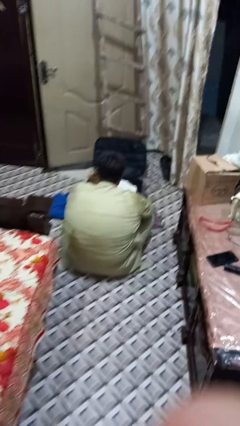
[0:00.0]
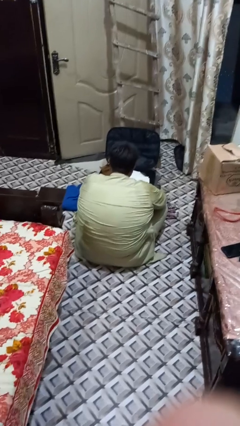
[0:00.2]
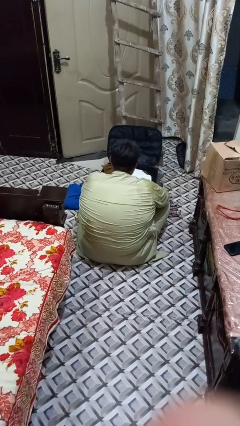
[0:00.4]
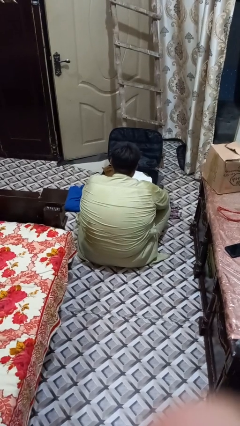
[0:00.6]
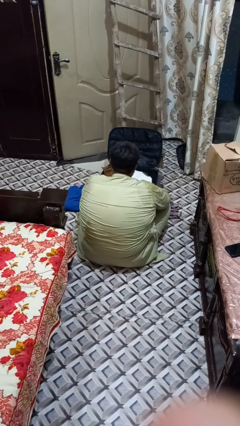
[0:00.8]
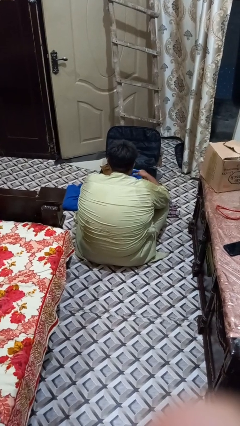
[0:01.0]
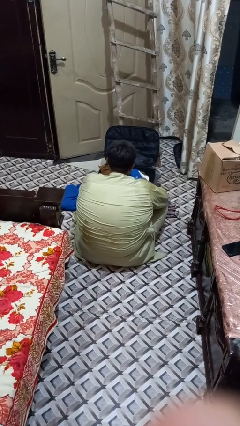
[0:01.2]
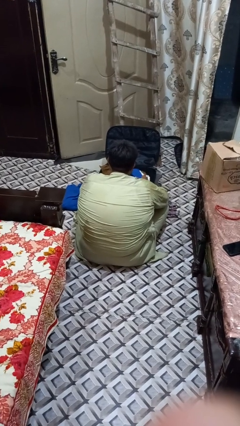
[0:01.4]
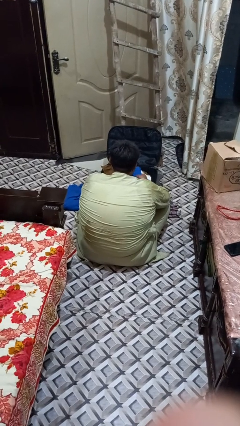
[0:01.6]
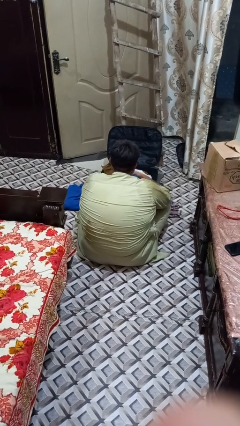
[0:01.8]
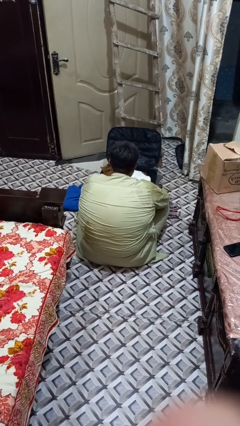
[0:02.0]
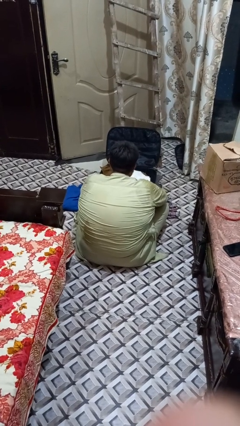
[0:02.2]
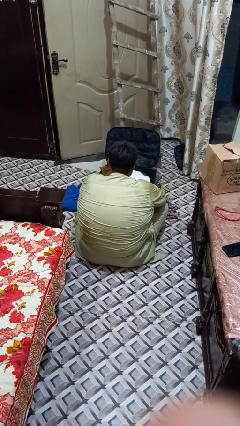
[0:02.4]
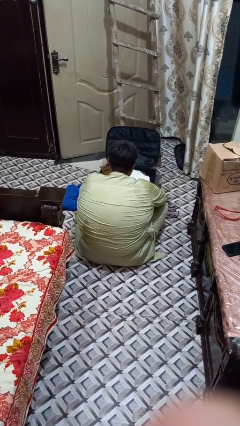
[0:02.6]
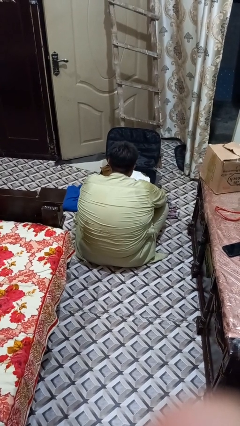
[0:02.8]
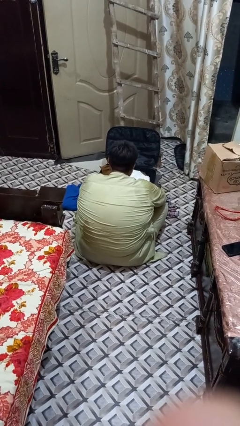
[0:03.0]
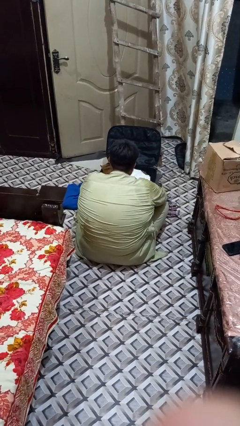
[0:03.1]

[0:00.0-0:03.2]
person unloads clothes from suitcase

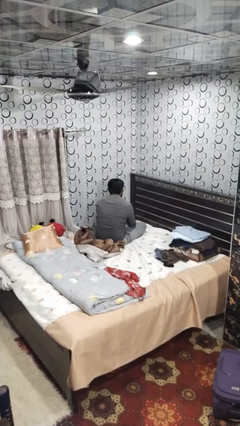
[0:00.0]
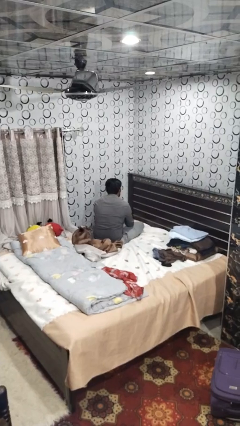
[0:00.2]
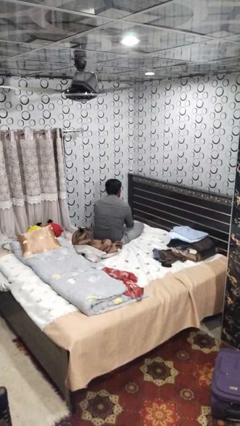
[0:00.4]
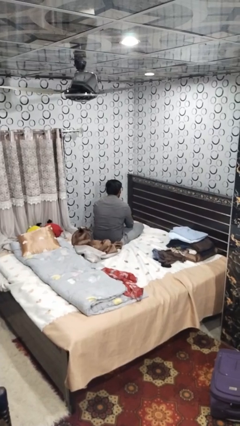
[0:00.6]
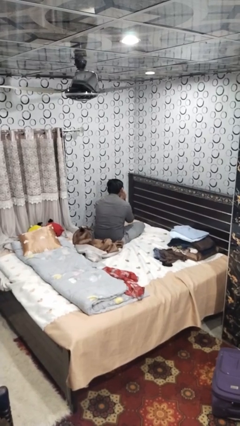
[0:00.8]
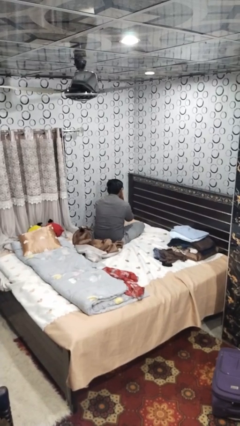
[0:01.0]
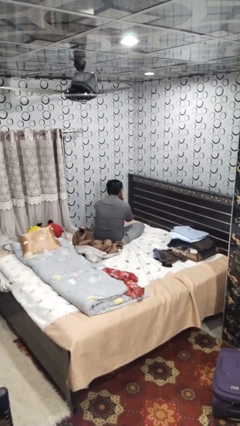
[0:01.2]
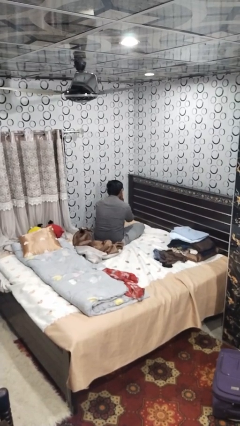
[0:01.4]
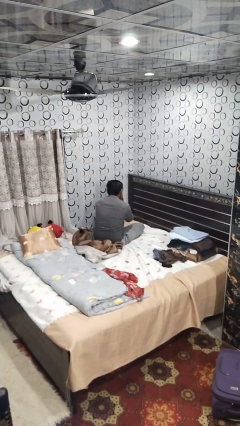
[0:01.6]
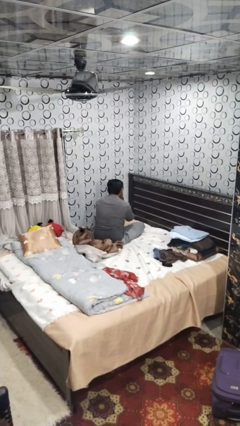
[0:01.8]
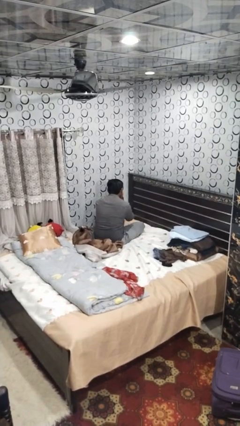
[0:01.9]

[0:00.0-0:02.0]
person covers face with hands

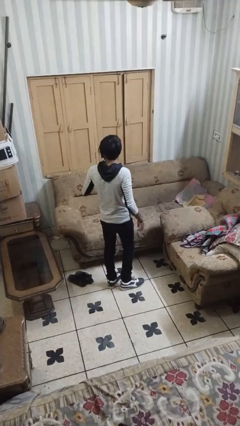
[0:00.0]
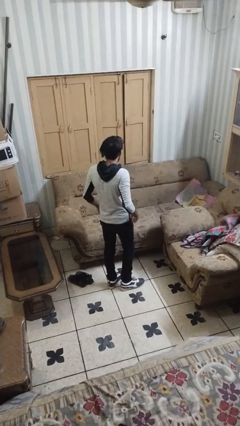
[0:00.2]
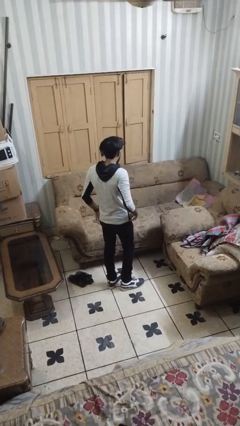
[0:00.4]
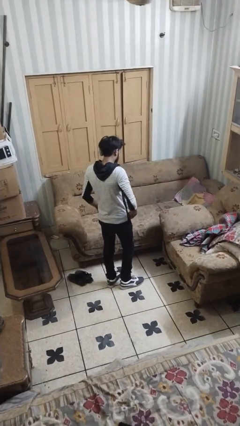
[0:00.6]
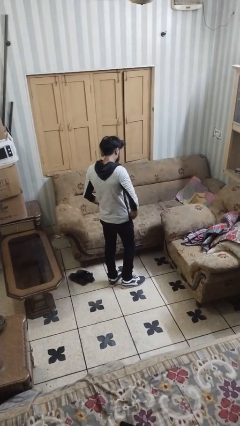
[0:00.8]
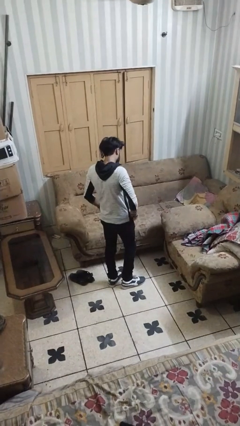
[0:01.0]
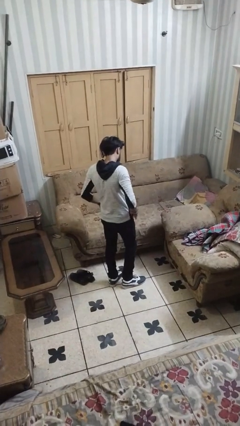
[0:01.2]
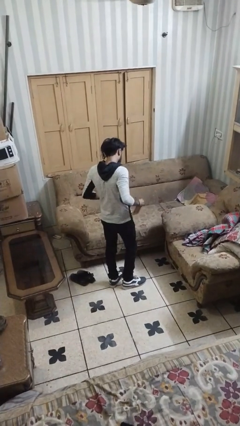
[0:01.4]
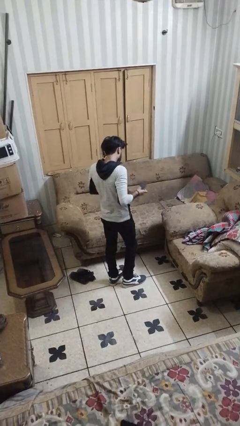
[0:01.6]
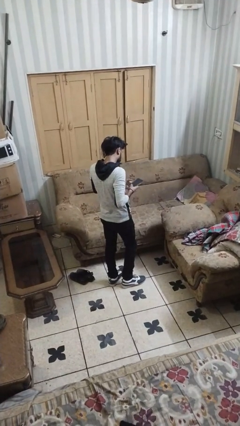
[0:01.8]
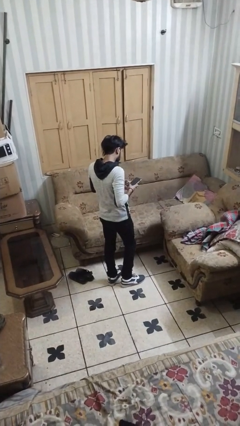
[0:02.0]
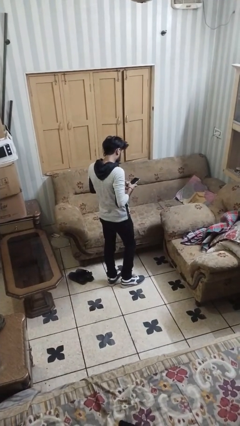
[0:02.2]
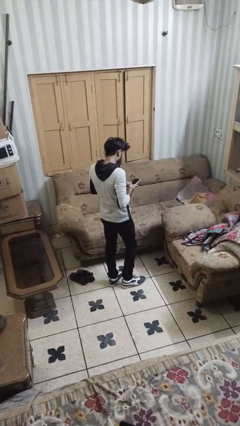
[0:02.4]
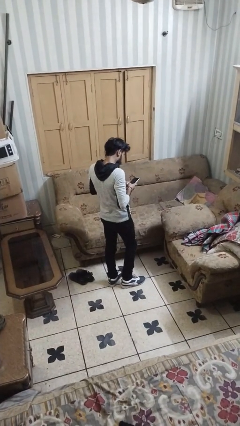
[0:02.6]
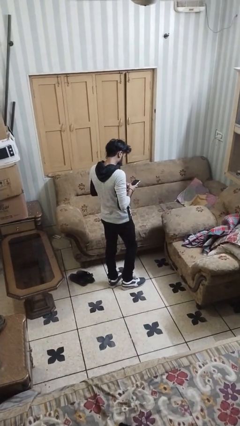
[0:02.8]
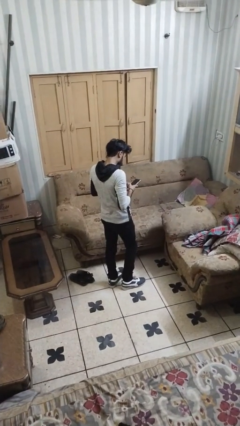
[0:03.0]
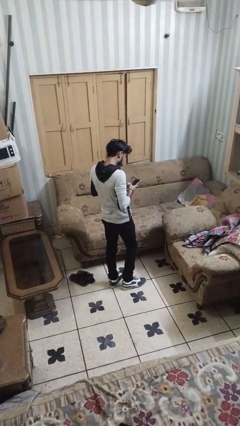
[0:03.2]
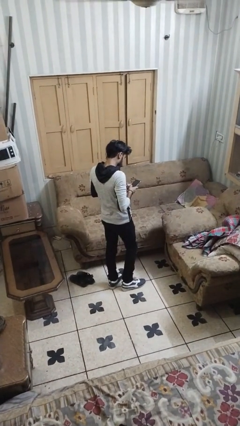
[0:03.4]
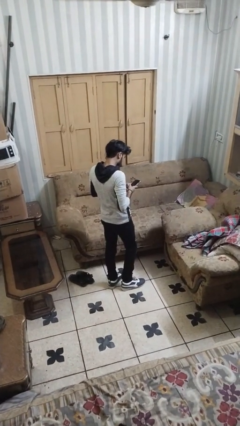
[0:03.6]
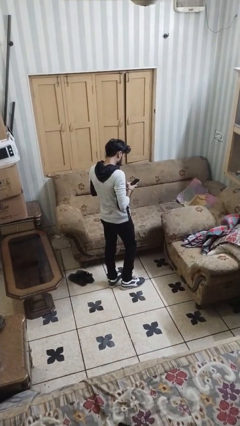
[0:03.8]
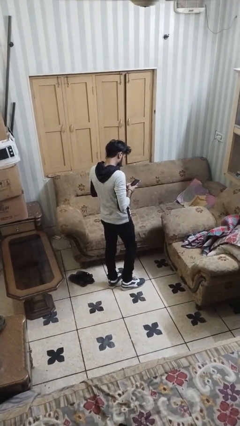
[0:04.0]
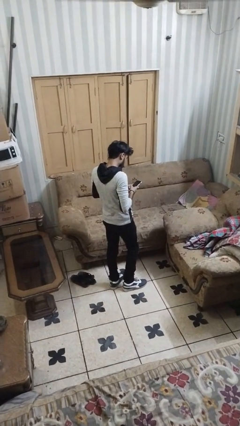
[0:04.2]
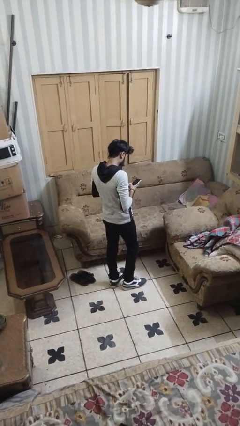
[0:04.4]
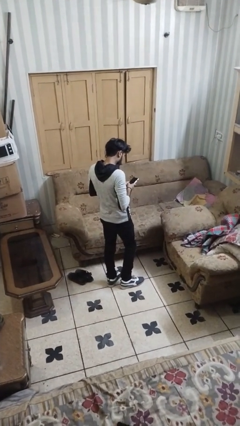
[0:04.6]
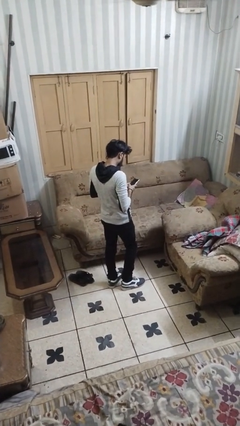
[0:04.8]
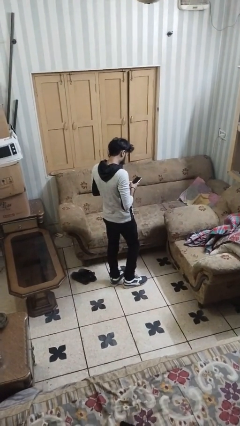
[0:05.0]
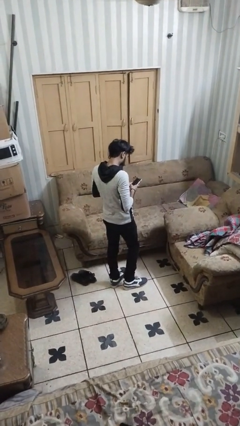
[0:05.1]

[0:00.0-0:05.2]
person takes phone from pocket

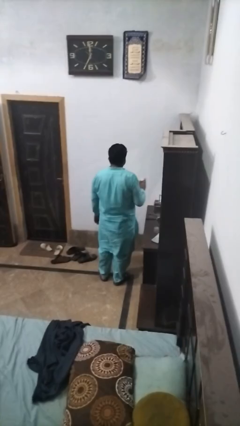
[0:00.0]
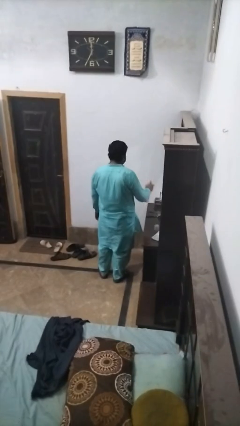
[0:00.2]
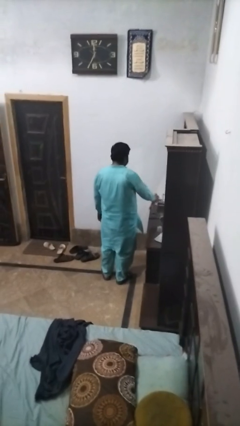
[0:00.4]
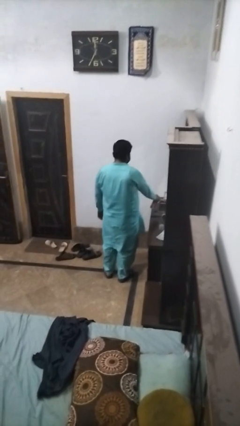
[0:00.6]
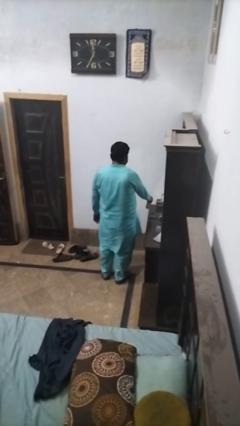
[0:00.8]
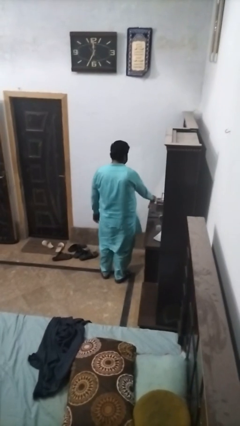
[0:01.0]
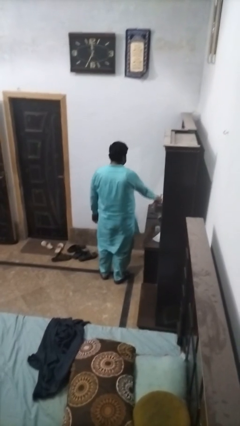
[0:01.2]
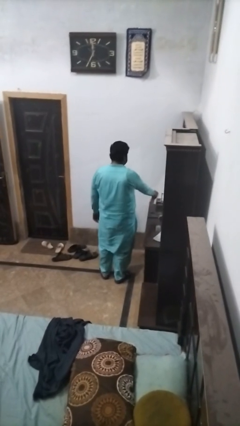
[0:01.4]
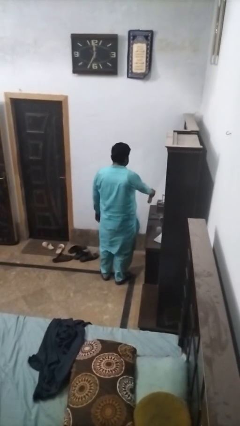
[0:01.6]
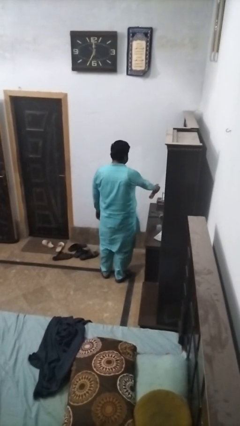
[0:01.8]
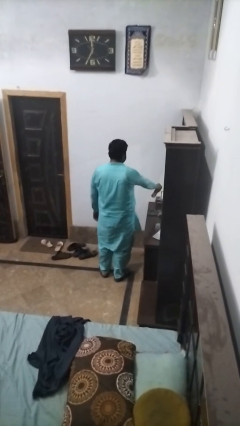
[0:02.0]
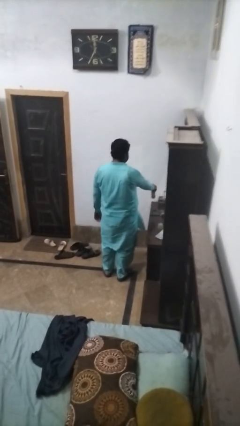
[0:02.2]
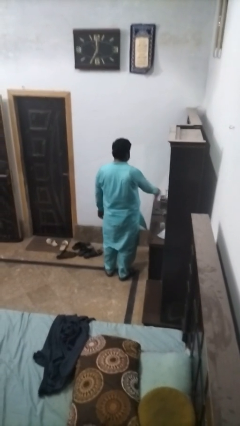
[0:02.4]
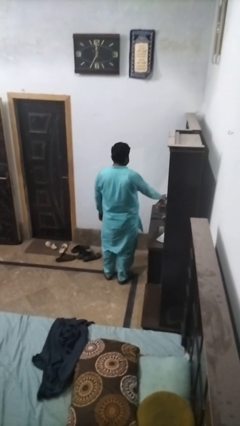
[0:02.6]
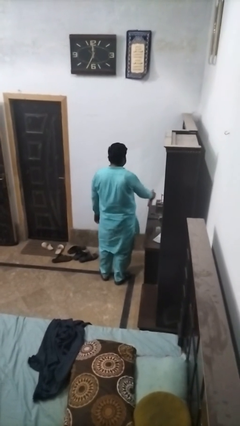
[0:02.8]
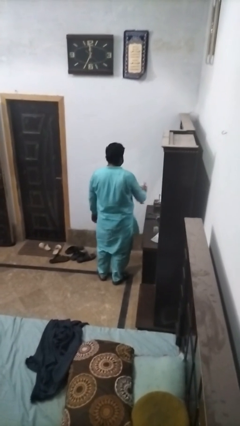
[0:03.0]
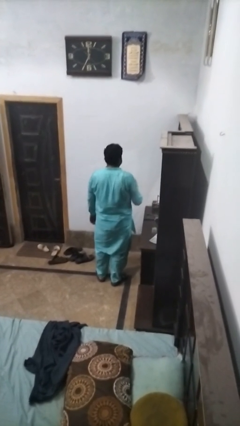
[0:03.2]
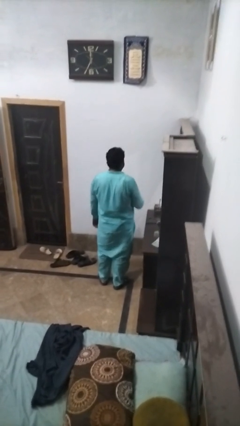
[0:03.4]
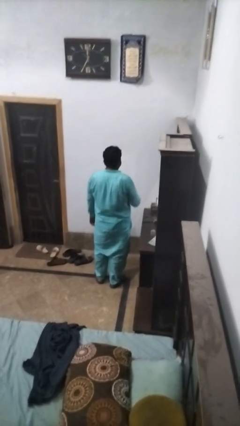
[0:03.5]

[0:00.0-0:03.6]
person sprays from bottle

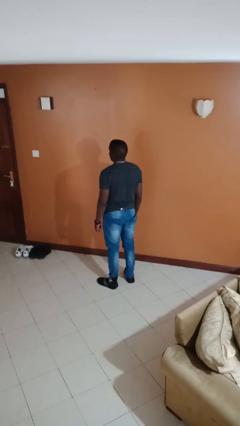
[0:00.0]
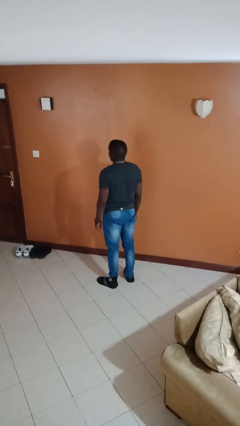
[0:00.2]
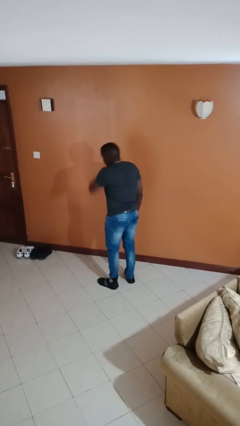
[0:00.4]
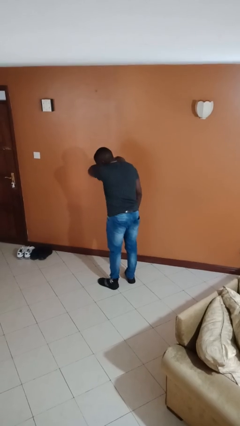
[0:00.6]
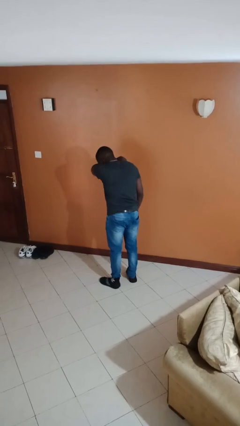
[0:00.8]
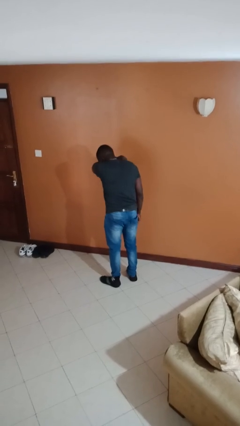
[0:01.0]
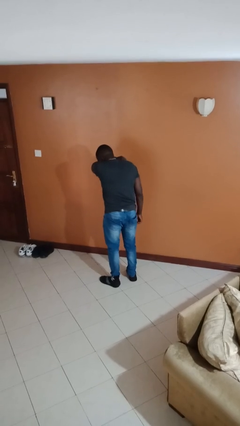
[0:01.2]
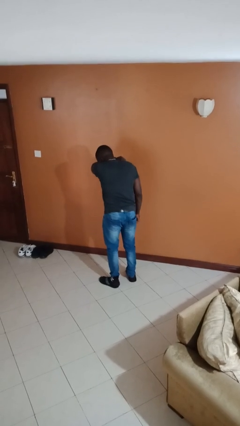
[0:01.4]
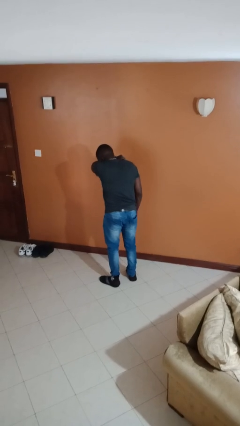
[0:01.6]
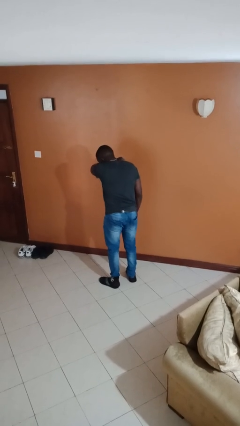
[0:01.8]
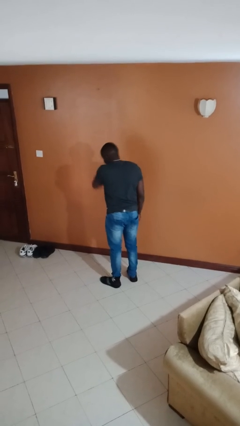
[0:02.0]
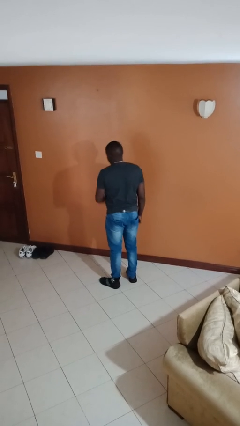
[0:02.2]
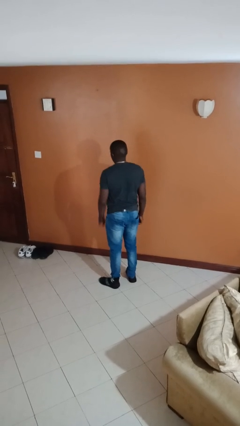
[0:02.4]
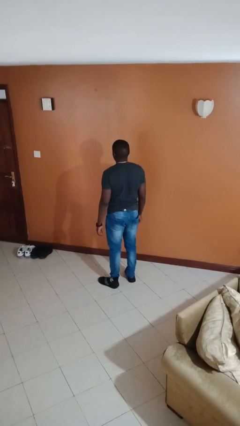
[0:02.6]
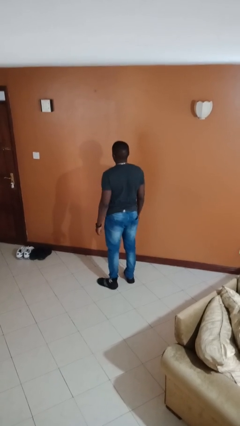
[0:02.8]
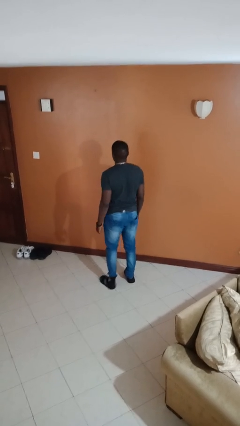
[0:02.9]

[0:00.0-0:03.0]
person sneezes into arm

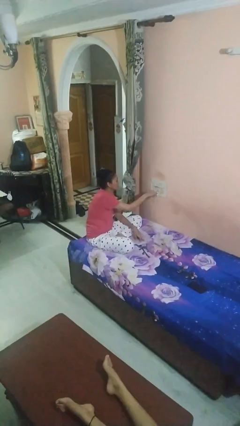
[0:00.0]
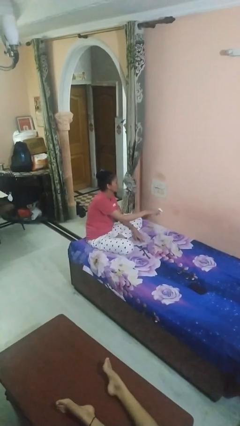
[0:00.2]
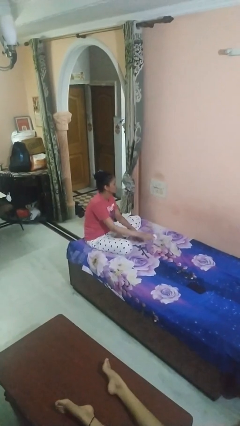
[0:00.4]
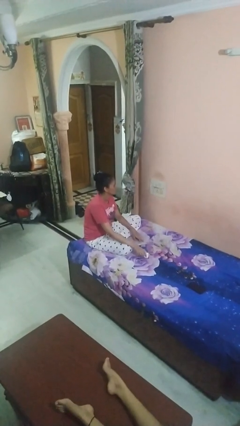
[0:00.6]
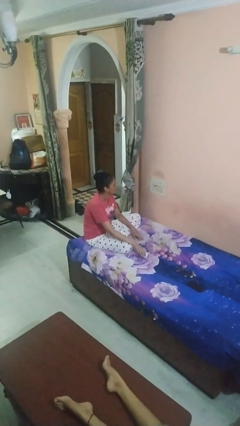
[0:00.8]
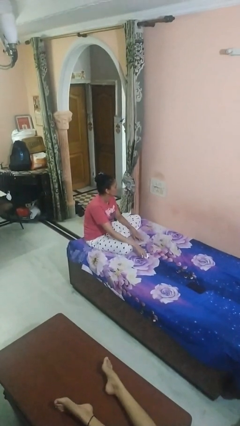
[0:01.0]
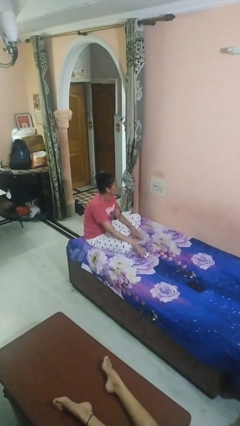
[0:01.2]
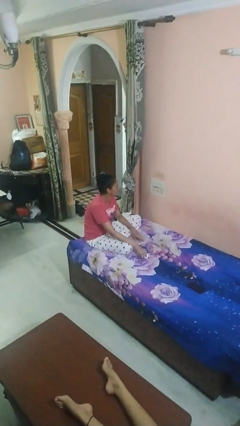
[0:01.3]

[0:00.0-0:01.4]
person unplugs from electrical socket
